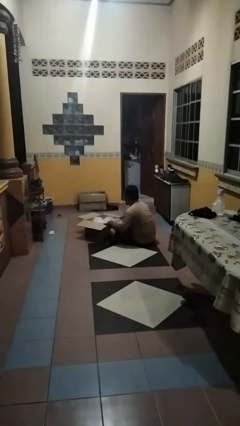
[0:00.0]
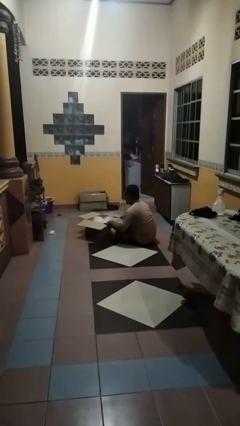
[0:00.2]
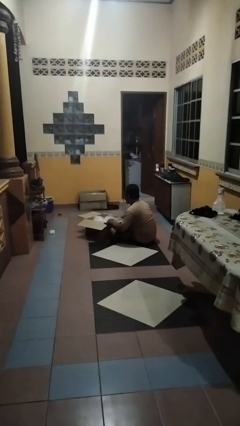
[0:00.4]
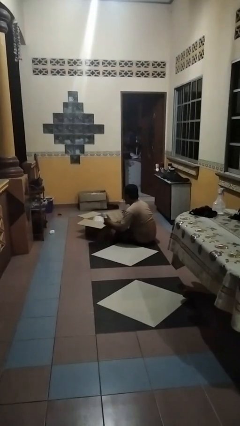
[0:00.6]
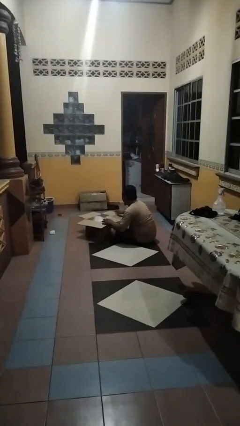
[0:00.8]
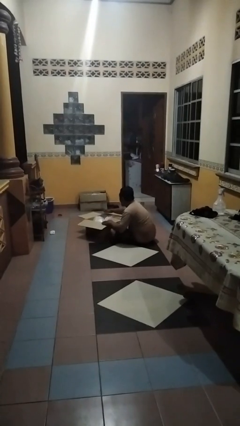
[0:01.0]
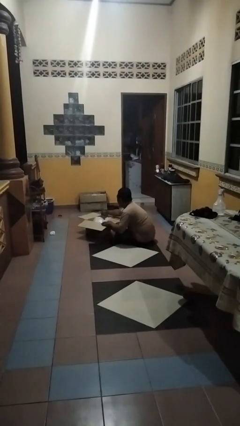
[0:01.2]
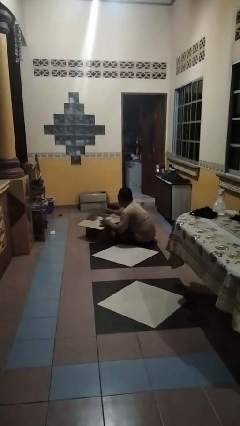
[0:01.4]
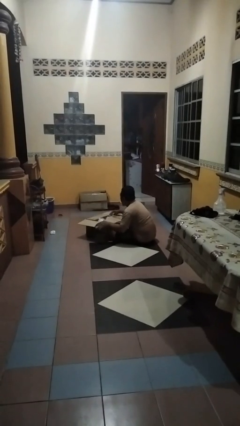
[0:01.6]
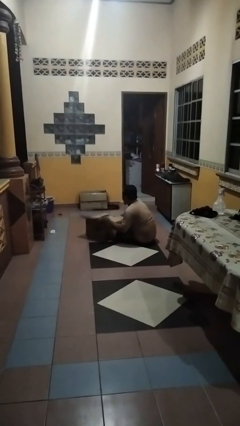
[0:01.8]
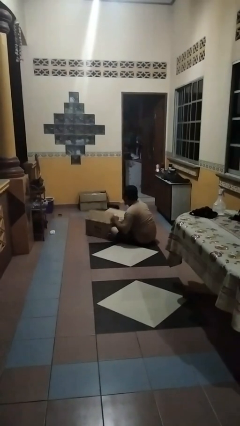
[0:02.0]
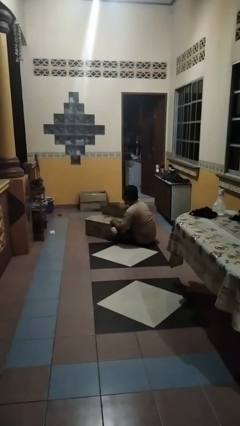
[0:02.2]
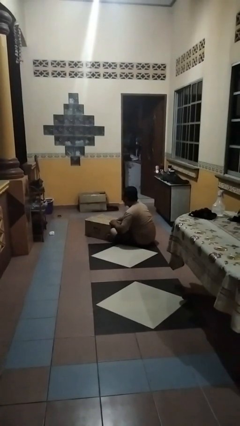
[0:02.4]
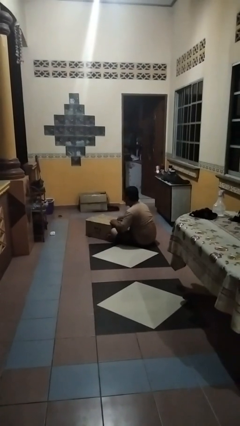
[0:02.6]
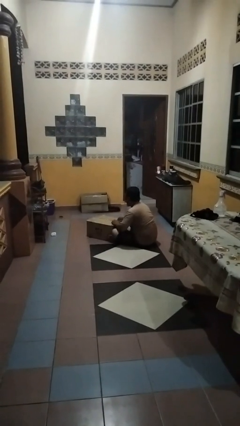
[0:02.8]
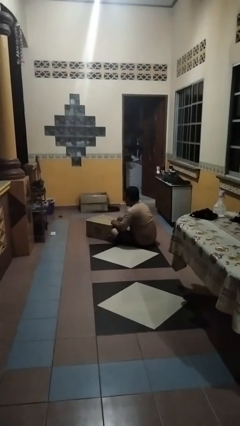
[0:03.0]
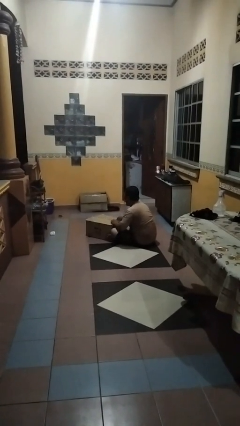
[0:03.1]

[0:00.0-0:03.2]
person closes box

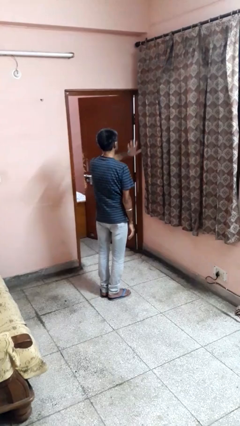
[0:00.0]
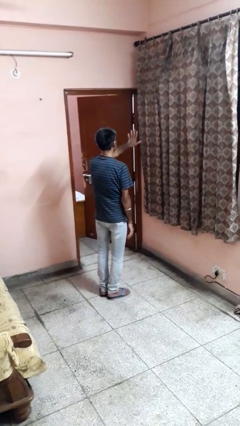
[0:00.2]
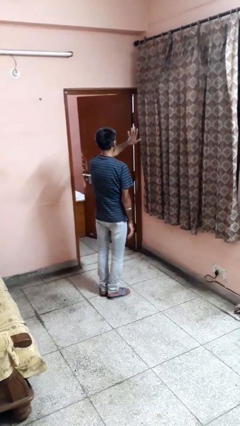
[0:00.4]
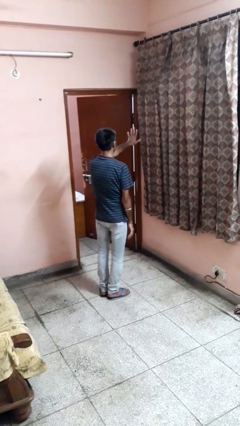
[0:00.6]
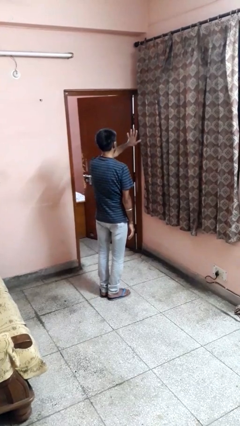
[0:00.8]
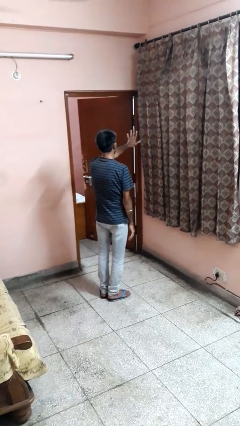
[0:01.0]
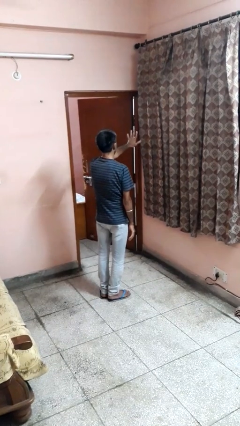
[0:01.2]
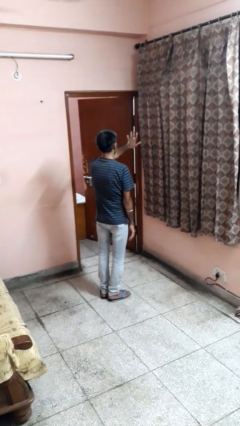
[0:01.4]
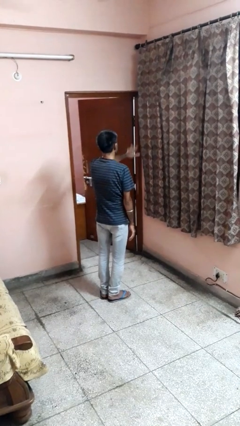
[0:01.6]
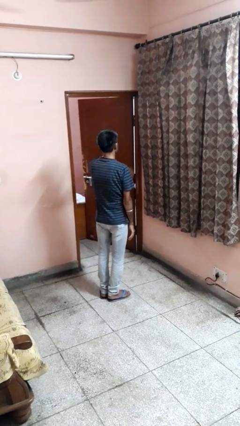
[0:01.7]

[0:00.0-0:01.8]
person gestures number five

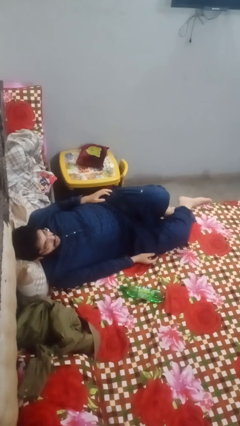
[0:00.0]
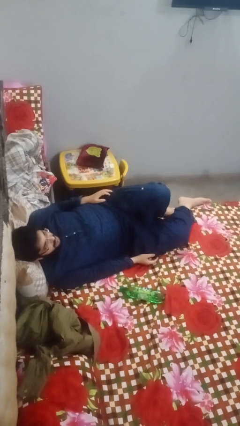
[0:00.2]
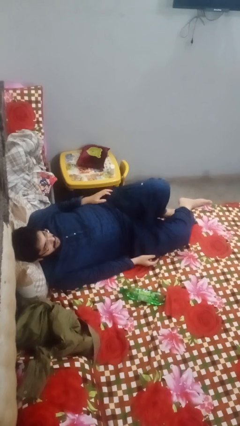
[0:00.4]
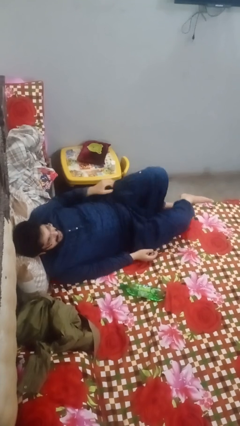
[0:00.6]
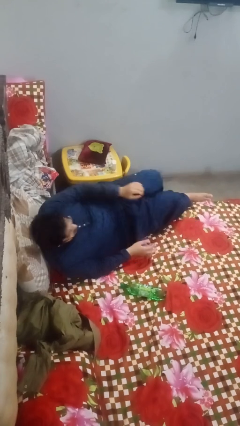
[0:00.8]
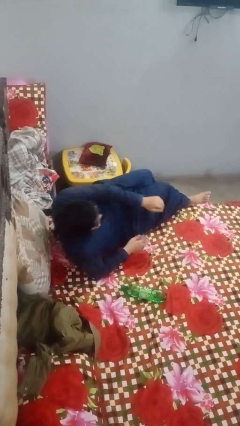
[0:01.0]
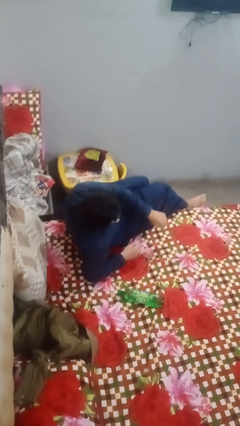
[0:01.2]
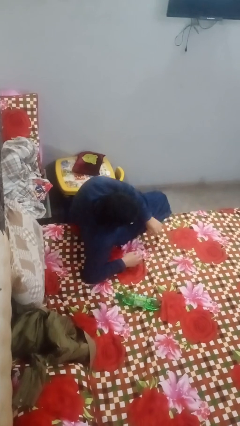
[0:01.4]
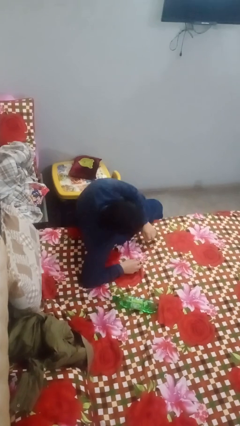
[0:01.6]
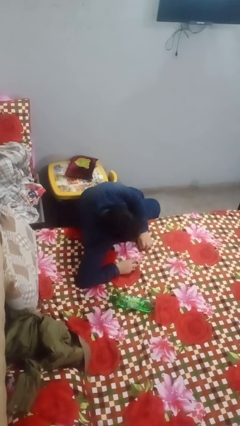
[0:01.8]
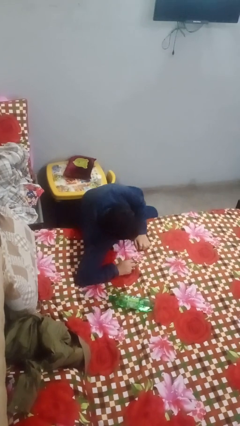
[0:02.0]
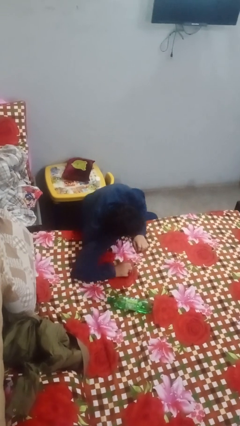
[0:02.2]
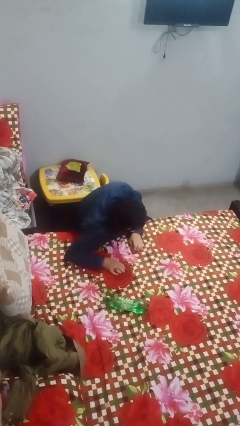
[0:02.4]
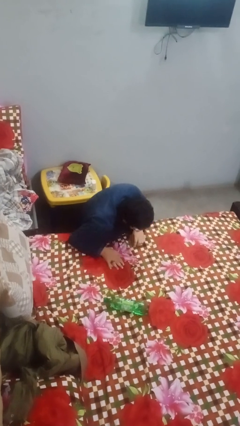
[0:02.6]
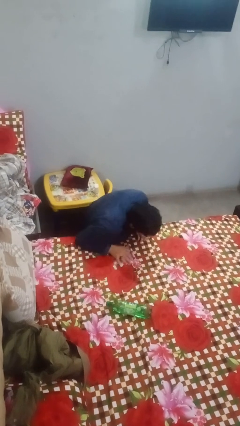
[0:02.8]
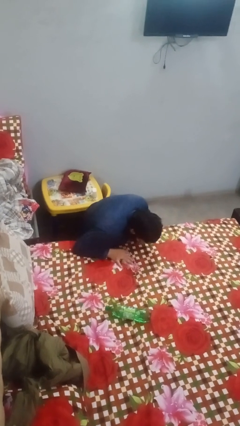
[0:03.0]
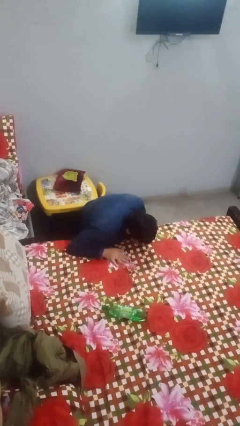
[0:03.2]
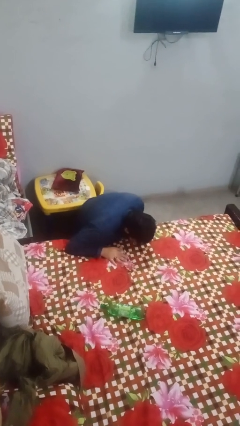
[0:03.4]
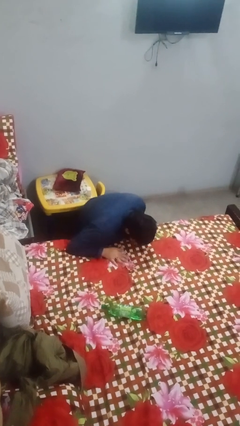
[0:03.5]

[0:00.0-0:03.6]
person falls from bed

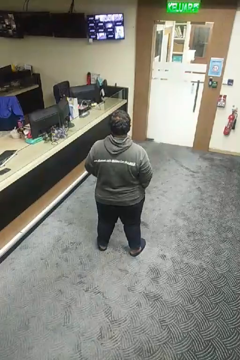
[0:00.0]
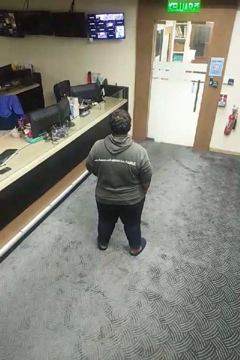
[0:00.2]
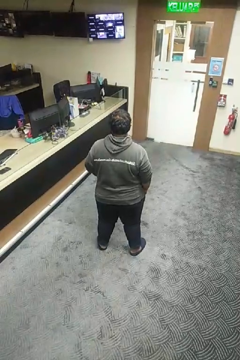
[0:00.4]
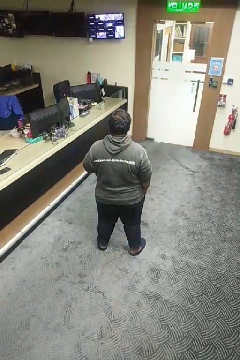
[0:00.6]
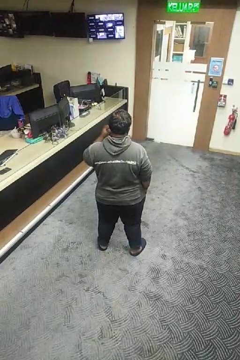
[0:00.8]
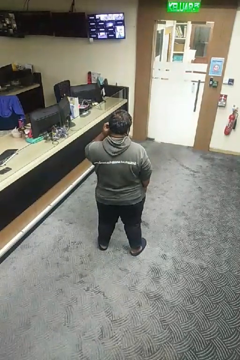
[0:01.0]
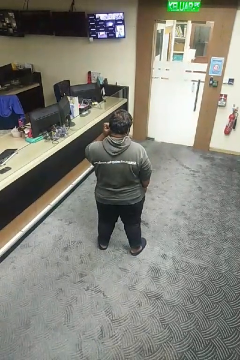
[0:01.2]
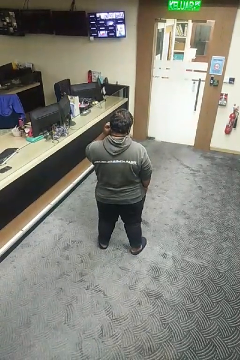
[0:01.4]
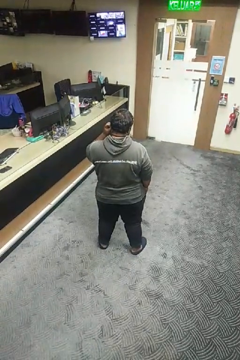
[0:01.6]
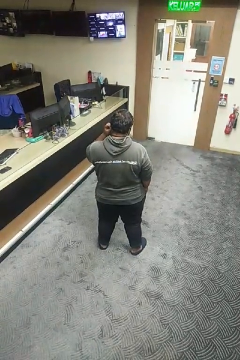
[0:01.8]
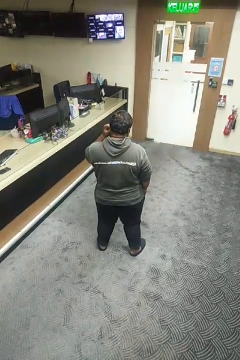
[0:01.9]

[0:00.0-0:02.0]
person touches earlobe

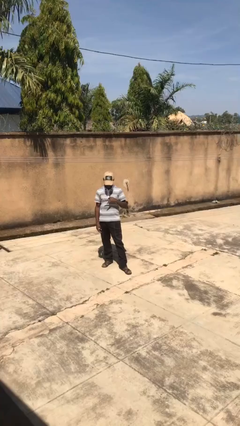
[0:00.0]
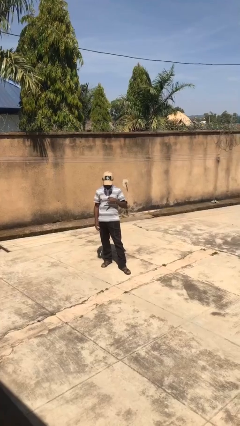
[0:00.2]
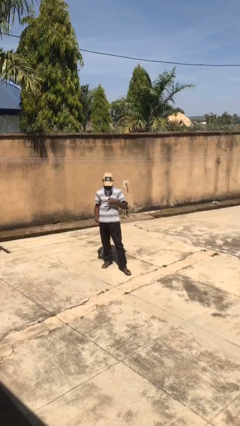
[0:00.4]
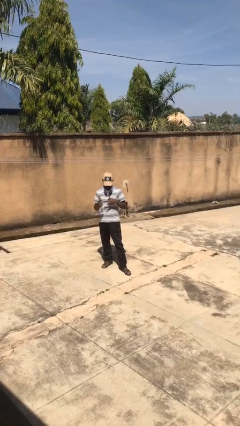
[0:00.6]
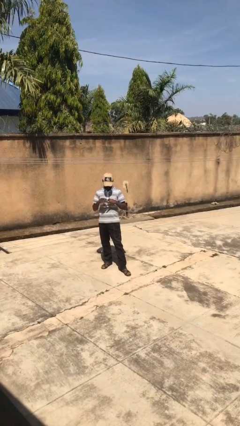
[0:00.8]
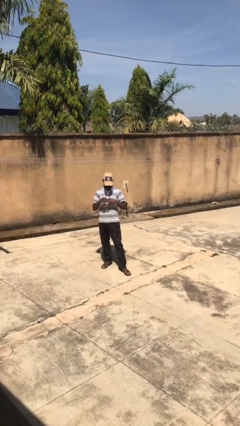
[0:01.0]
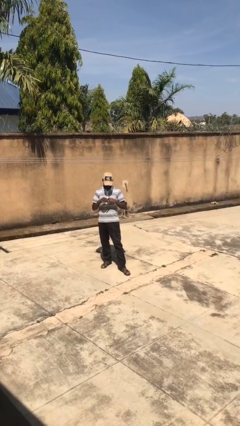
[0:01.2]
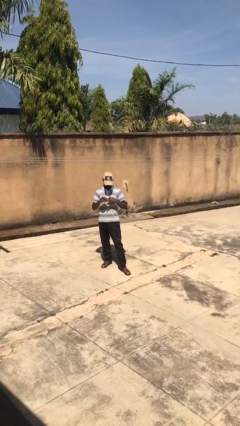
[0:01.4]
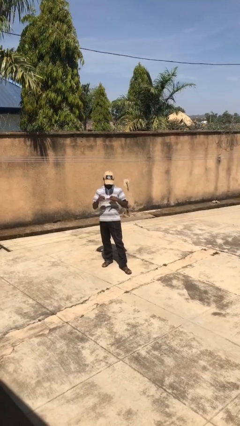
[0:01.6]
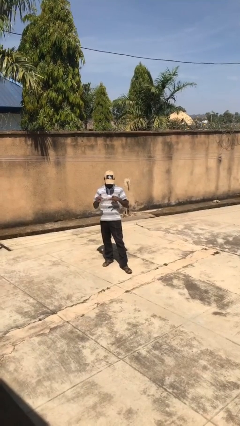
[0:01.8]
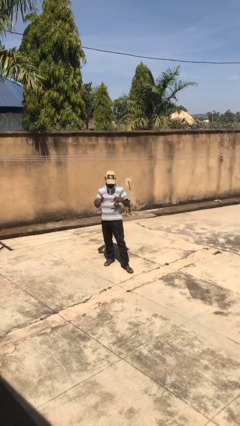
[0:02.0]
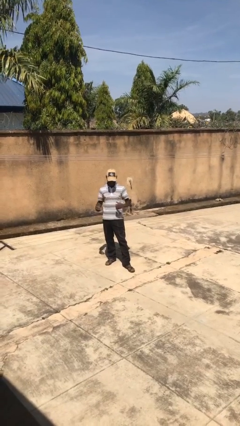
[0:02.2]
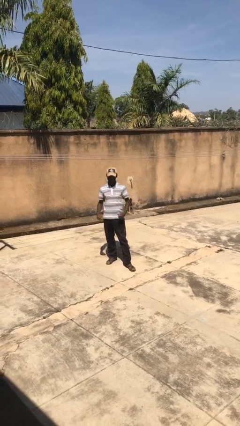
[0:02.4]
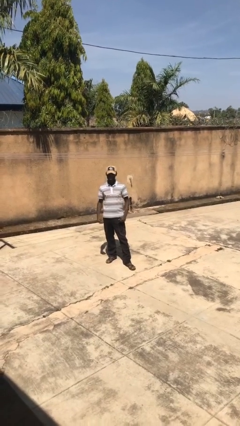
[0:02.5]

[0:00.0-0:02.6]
person takes off ring

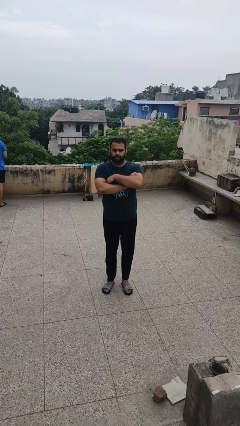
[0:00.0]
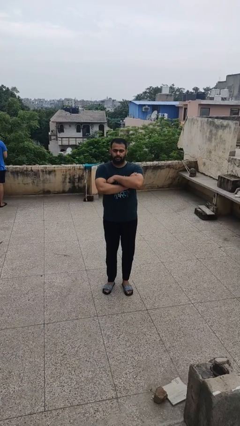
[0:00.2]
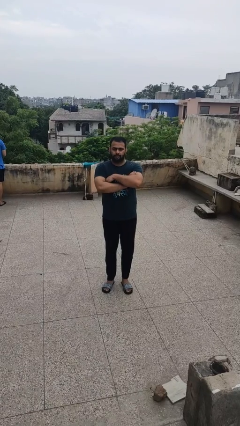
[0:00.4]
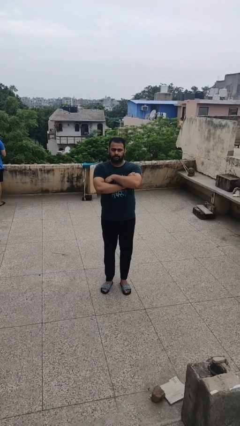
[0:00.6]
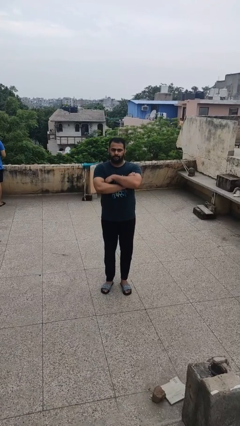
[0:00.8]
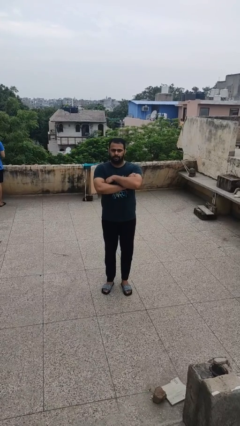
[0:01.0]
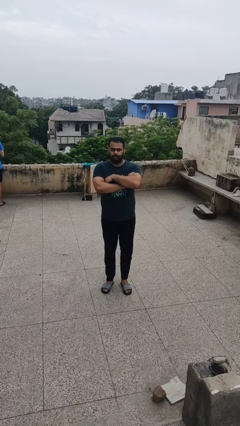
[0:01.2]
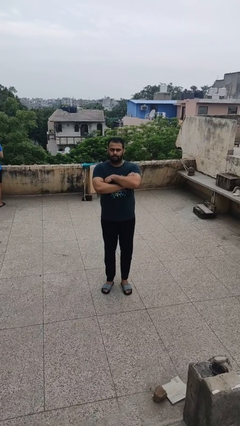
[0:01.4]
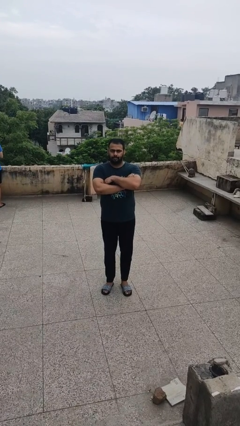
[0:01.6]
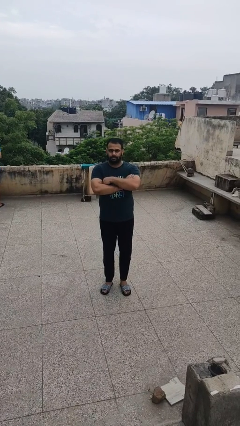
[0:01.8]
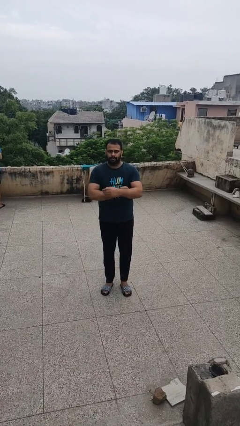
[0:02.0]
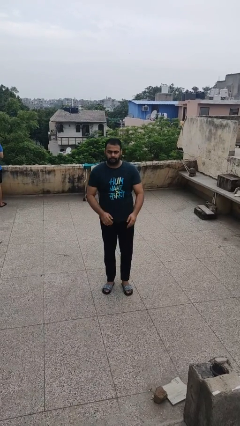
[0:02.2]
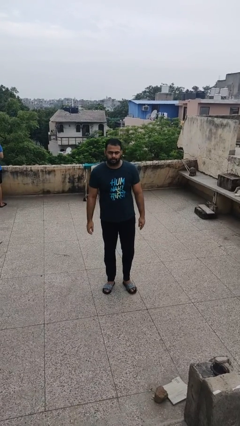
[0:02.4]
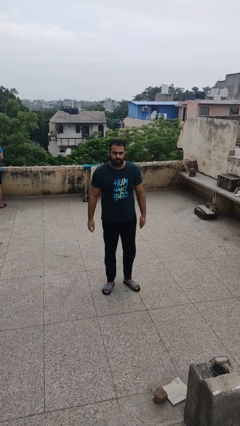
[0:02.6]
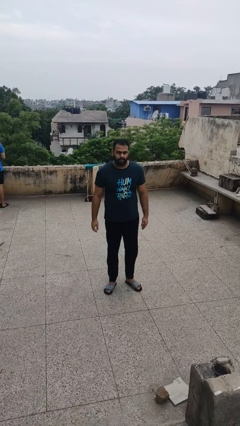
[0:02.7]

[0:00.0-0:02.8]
person crosses arms

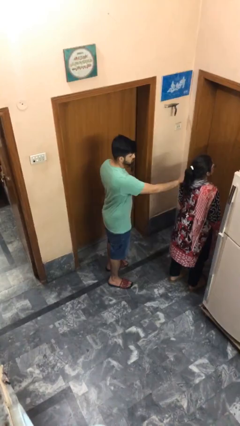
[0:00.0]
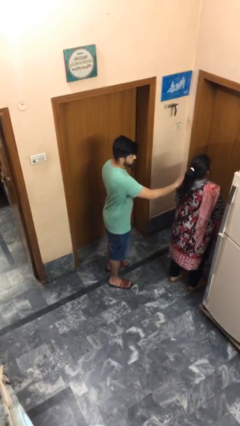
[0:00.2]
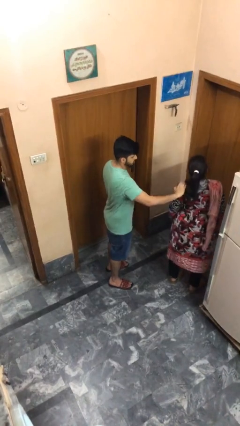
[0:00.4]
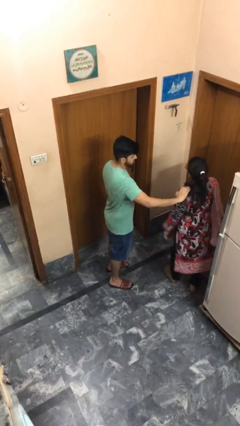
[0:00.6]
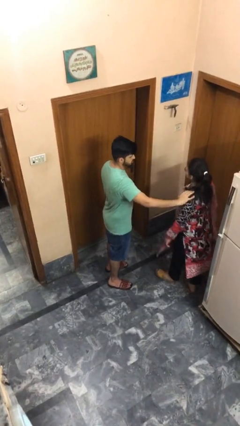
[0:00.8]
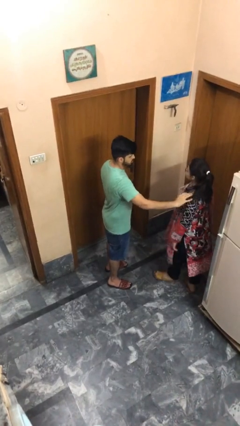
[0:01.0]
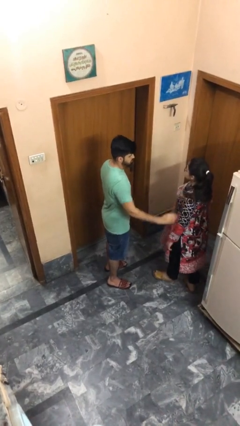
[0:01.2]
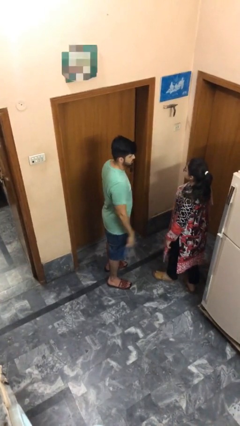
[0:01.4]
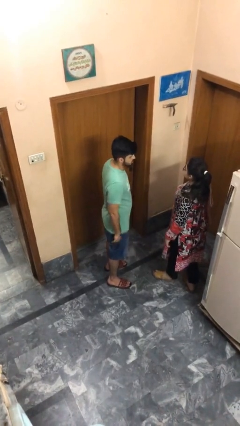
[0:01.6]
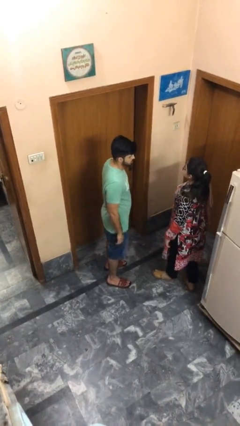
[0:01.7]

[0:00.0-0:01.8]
person spins person around
